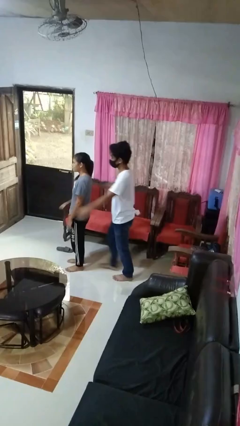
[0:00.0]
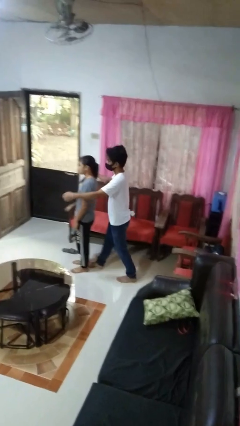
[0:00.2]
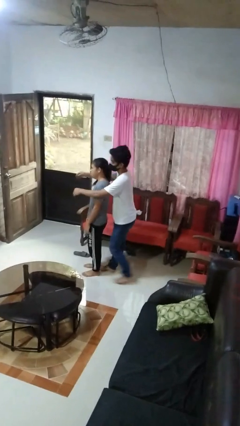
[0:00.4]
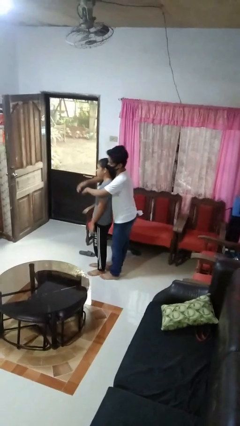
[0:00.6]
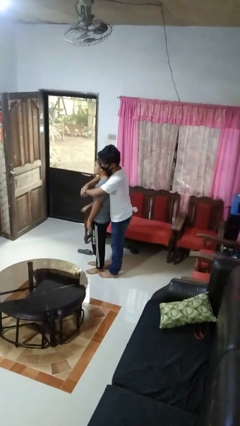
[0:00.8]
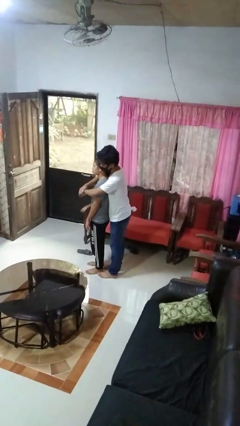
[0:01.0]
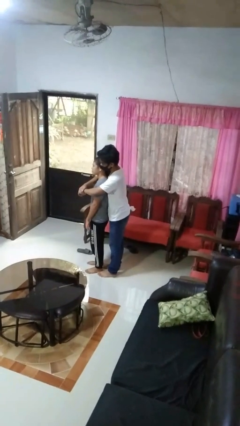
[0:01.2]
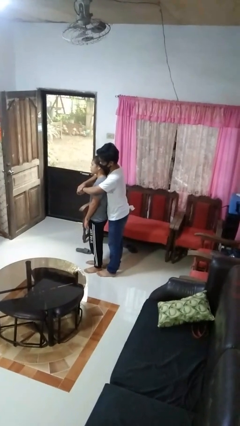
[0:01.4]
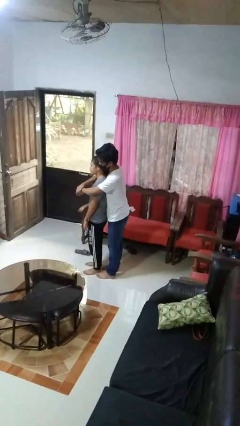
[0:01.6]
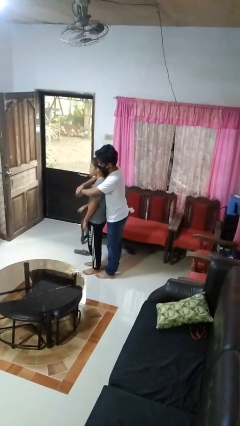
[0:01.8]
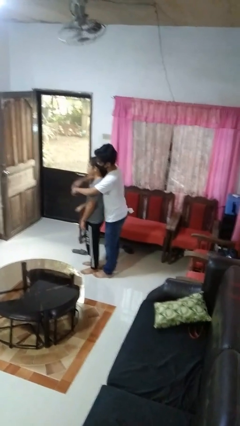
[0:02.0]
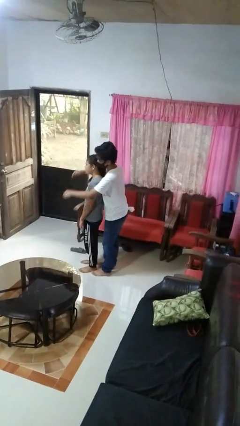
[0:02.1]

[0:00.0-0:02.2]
person hugs person from behind

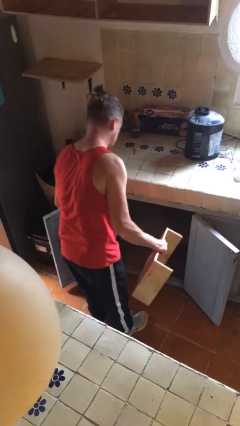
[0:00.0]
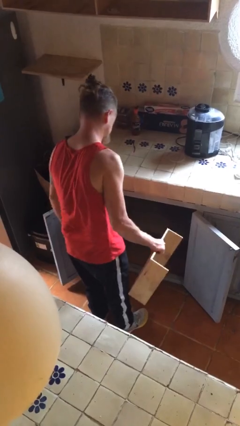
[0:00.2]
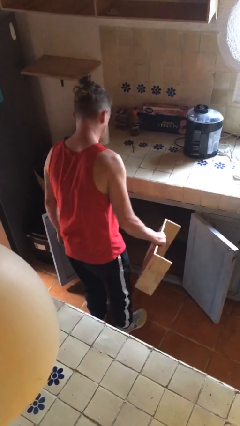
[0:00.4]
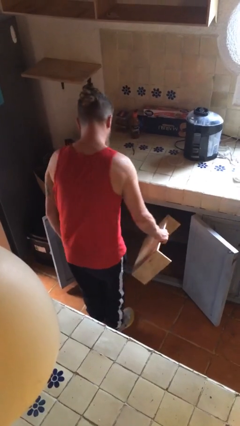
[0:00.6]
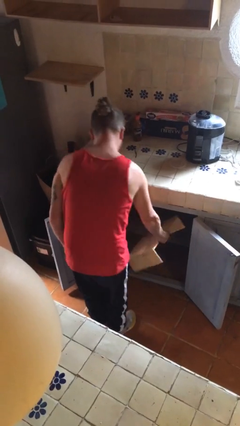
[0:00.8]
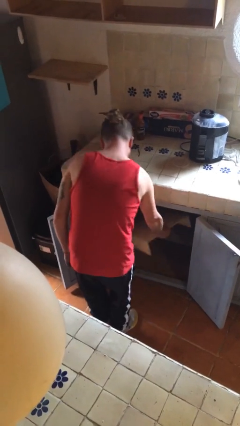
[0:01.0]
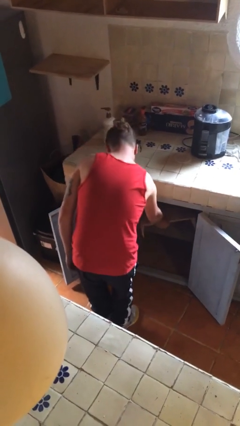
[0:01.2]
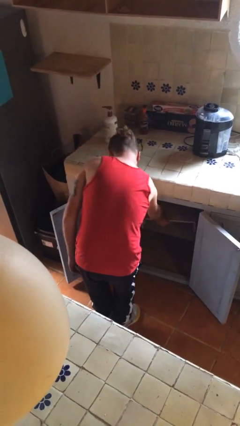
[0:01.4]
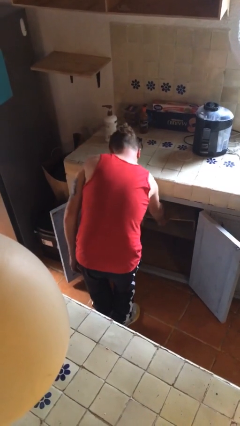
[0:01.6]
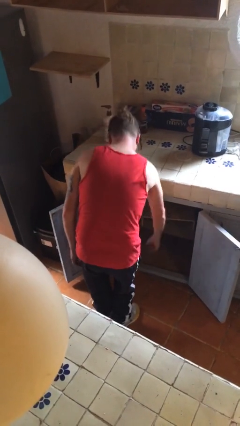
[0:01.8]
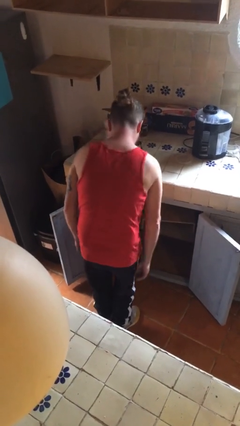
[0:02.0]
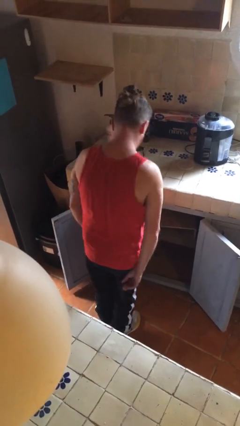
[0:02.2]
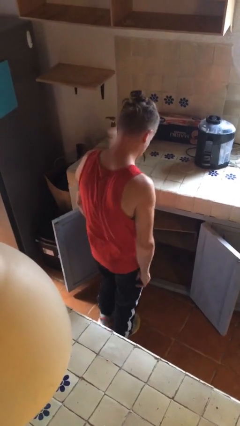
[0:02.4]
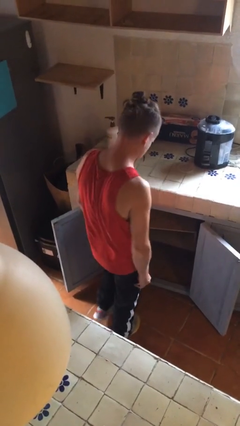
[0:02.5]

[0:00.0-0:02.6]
person puts down object into cabinet

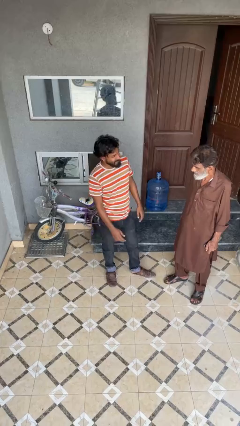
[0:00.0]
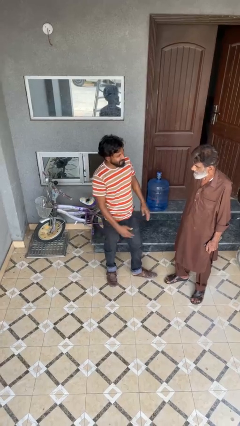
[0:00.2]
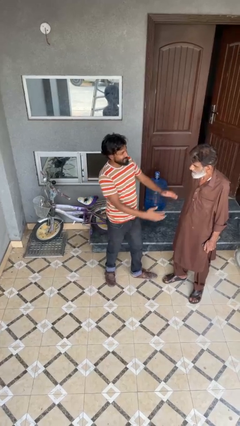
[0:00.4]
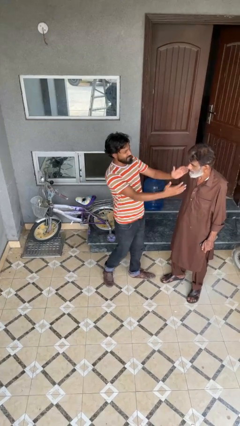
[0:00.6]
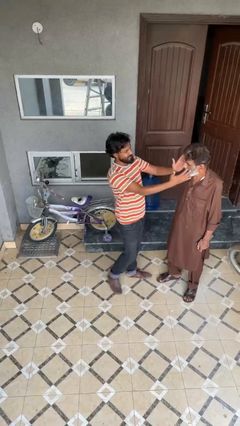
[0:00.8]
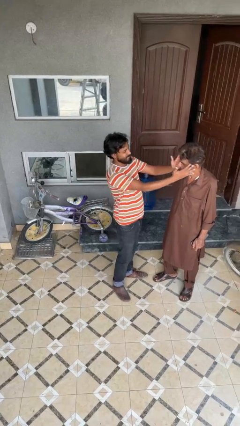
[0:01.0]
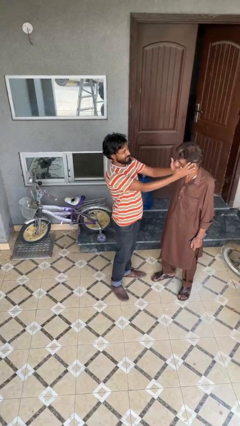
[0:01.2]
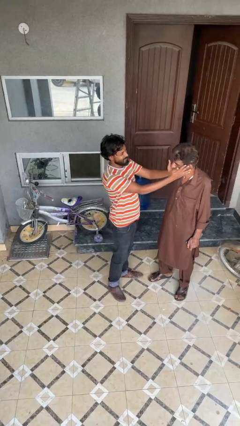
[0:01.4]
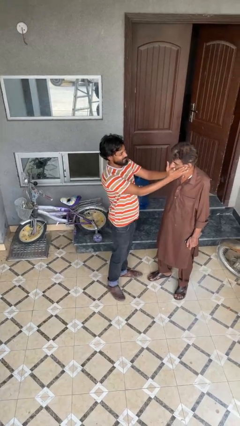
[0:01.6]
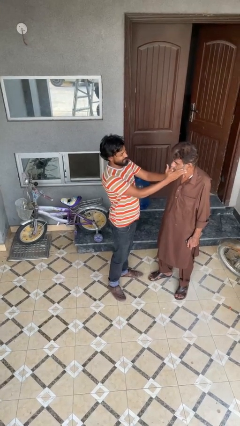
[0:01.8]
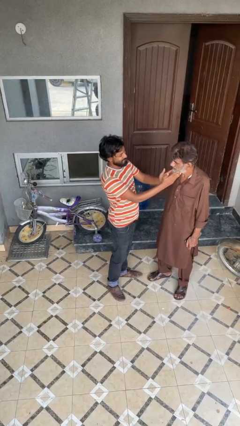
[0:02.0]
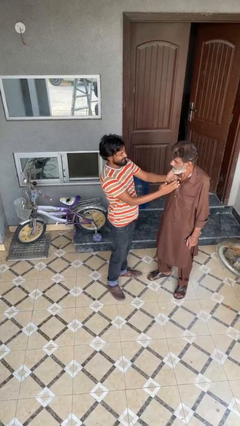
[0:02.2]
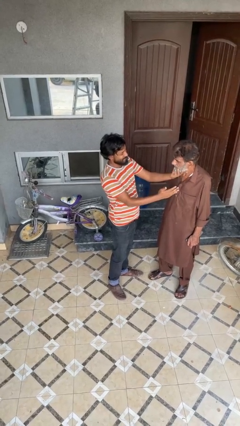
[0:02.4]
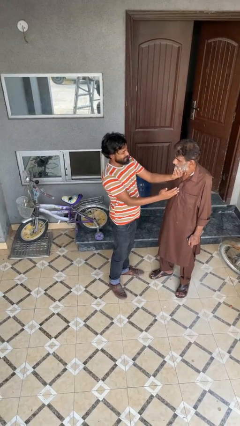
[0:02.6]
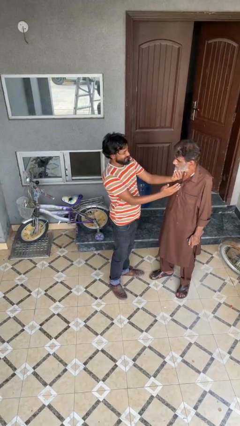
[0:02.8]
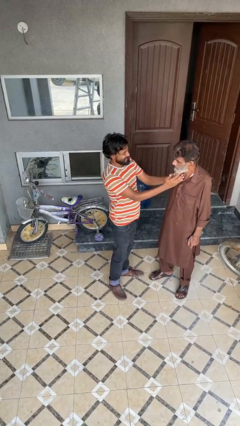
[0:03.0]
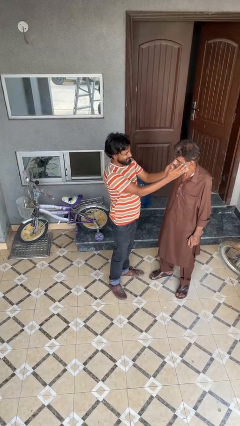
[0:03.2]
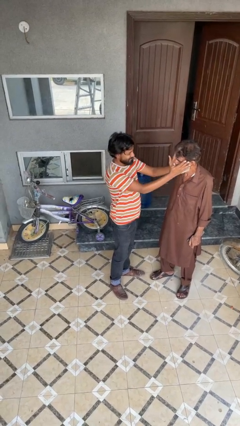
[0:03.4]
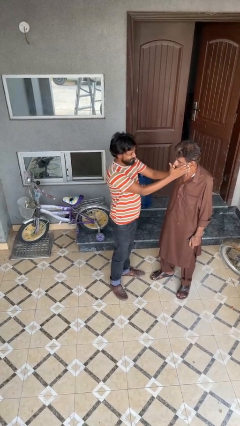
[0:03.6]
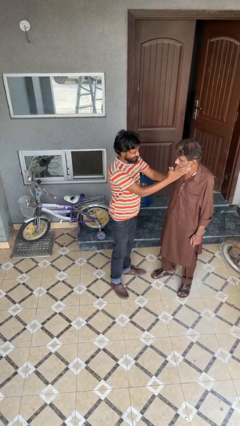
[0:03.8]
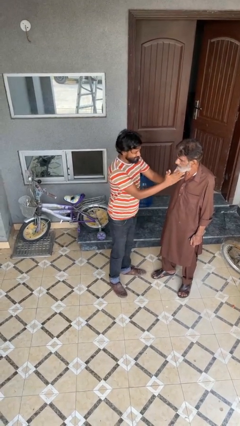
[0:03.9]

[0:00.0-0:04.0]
person touches face of person

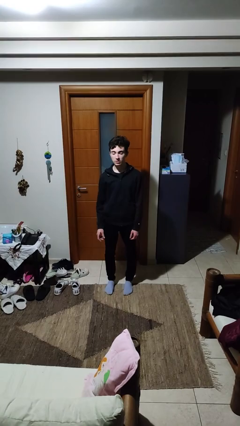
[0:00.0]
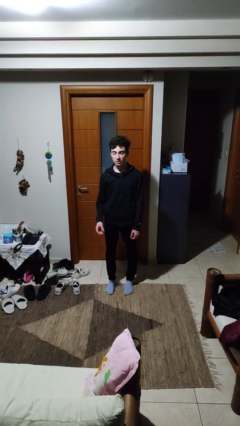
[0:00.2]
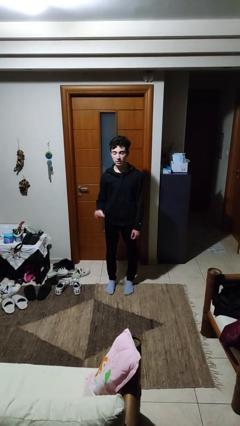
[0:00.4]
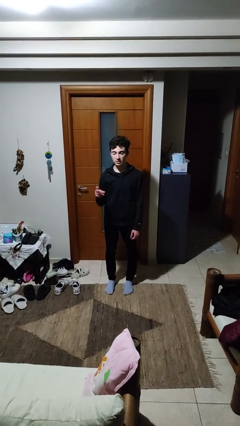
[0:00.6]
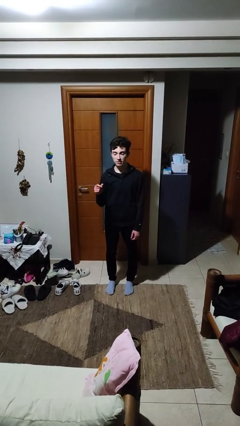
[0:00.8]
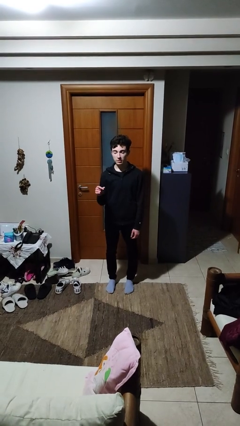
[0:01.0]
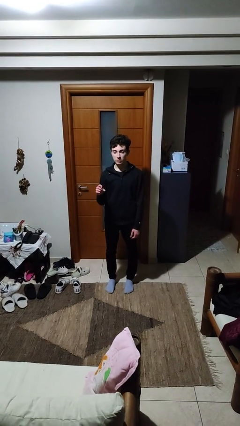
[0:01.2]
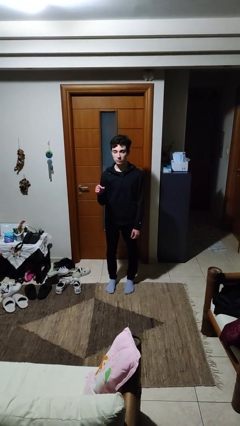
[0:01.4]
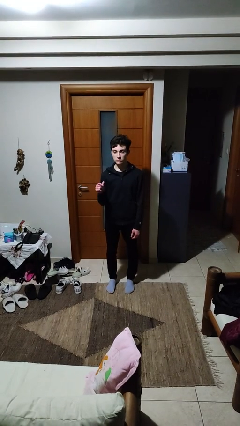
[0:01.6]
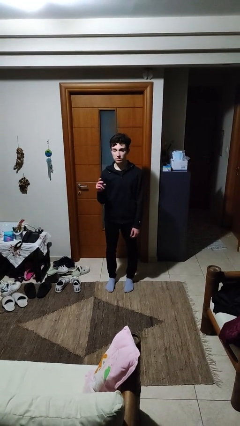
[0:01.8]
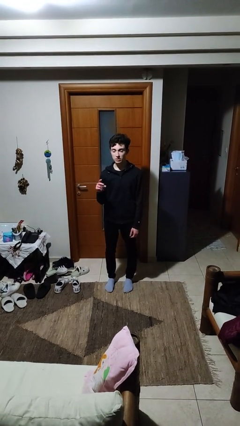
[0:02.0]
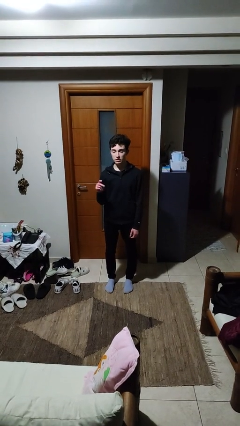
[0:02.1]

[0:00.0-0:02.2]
person snaps fingers

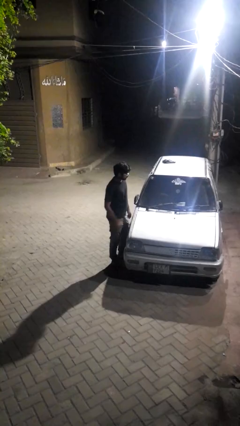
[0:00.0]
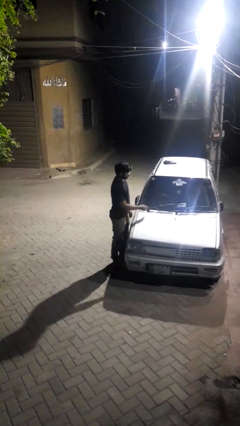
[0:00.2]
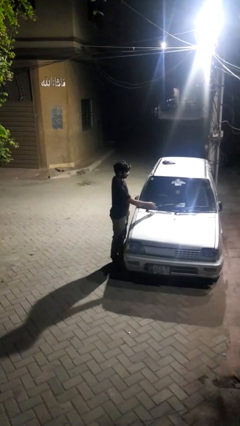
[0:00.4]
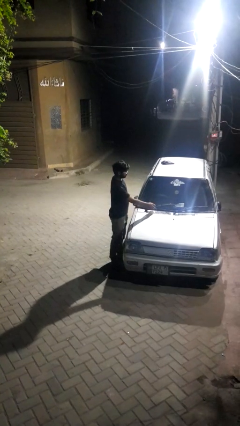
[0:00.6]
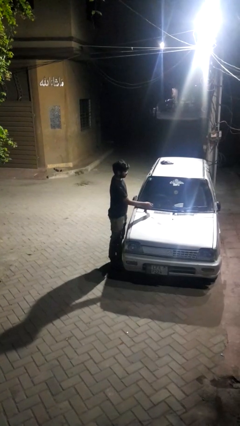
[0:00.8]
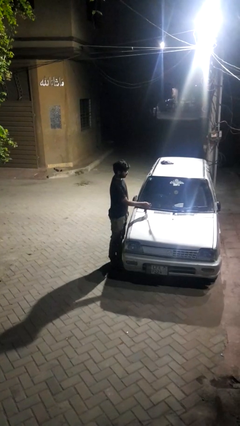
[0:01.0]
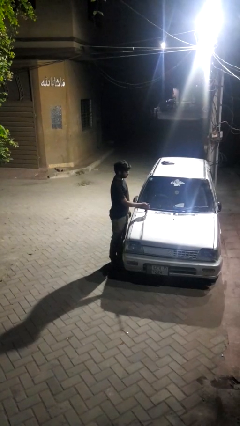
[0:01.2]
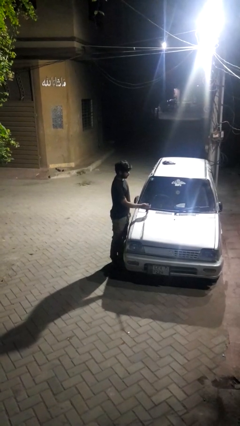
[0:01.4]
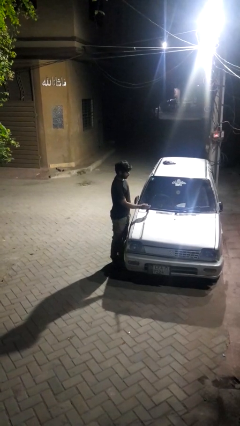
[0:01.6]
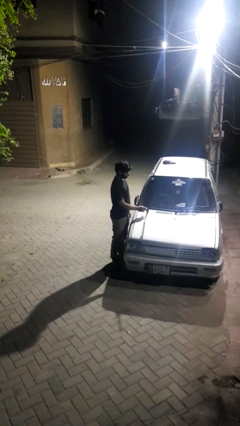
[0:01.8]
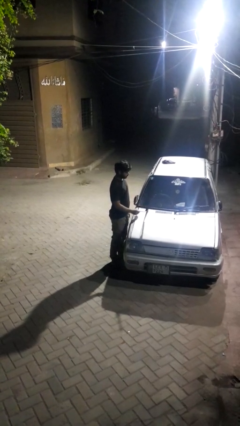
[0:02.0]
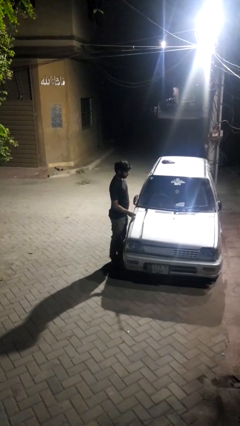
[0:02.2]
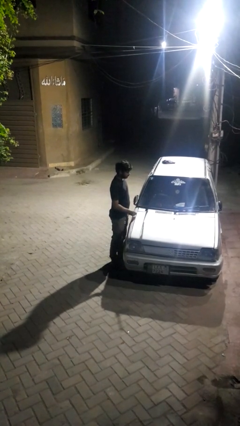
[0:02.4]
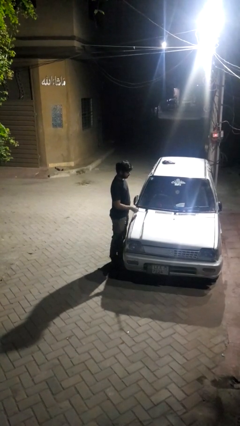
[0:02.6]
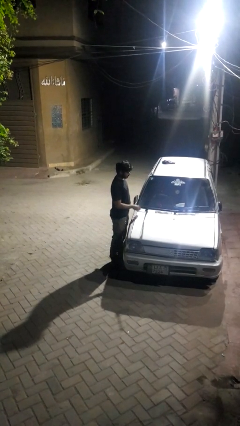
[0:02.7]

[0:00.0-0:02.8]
person flips up car wipers

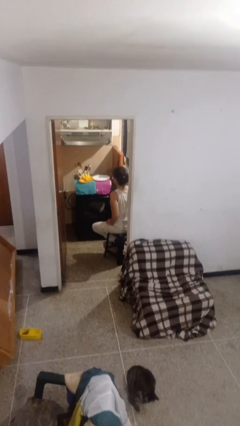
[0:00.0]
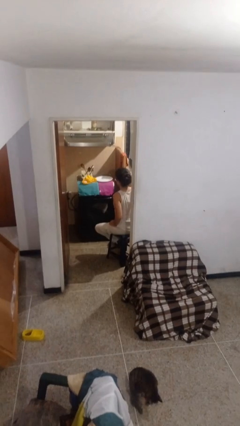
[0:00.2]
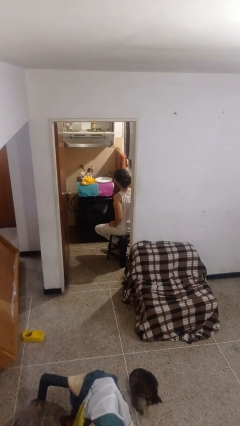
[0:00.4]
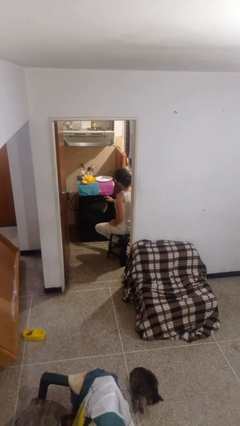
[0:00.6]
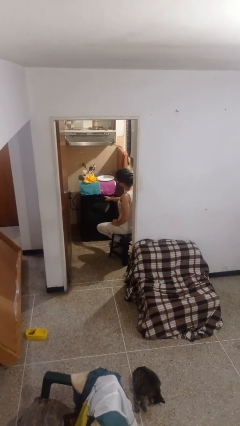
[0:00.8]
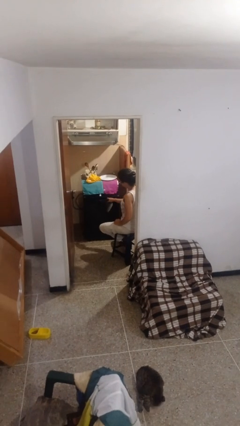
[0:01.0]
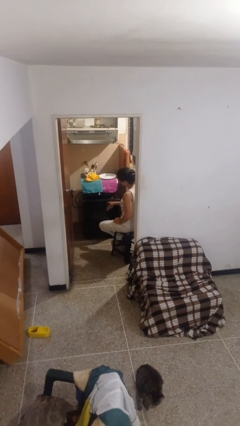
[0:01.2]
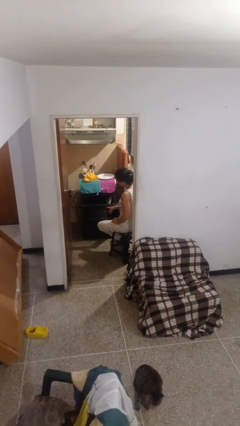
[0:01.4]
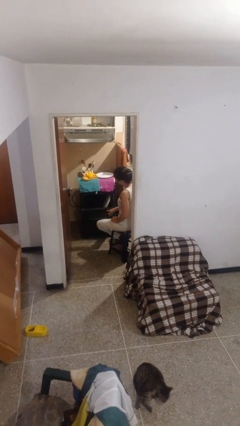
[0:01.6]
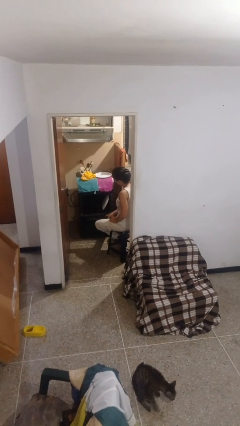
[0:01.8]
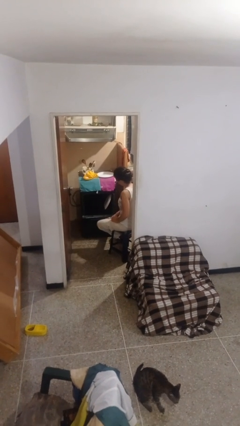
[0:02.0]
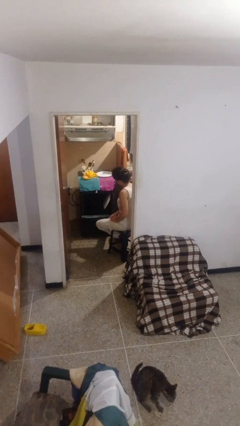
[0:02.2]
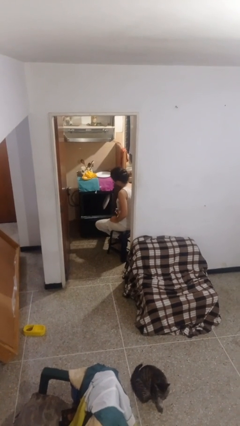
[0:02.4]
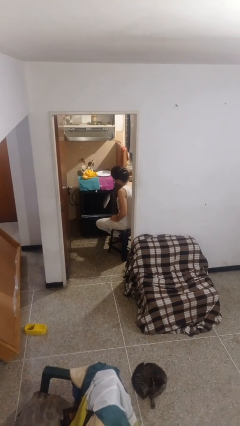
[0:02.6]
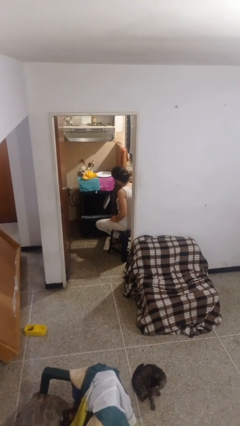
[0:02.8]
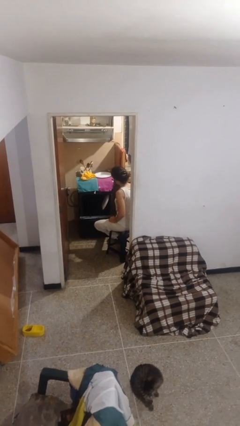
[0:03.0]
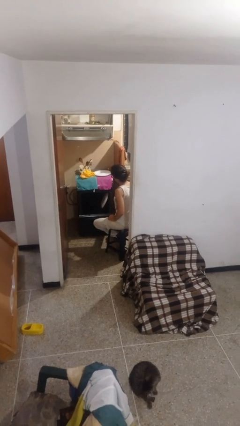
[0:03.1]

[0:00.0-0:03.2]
person opens dishwasher
